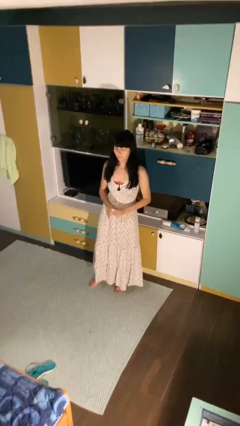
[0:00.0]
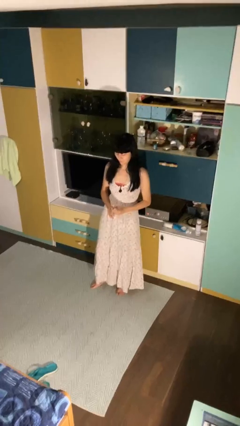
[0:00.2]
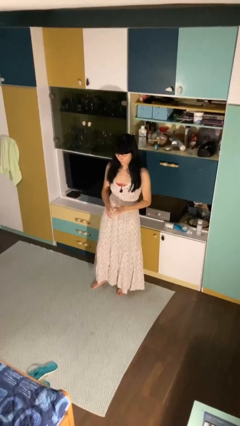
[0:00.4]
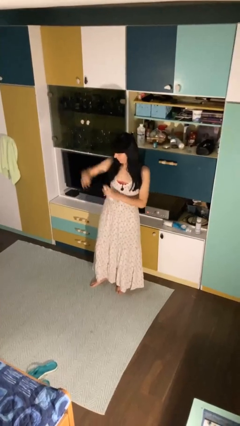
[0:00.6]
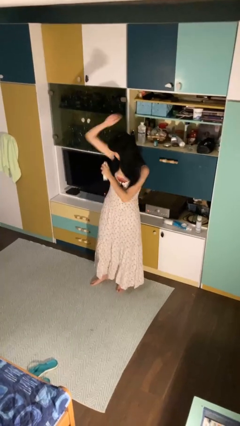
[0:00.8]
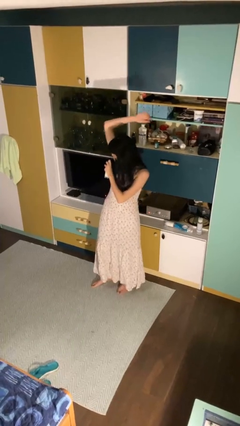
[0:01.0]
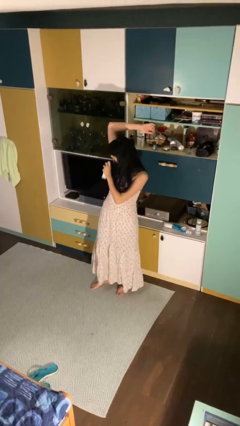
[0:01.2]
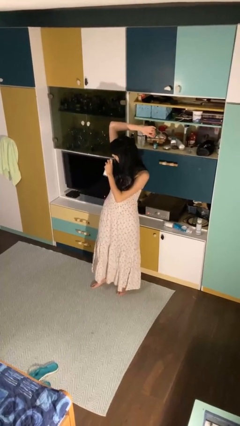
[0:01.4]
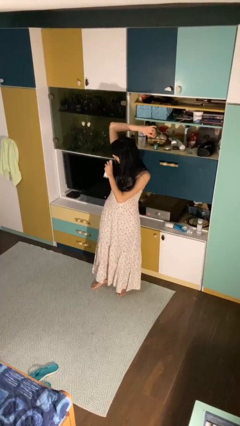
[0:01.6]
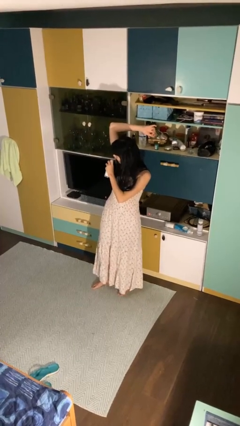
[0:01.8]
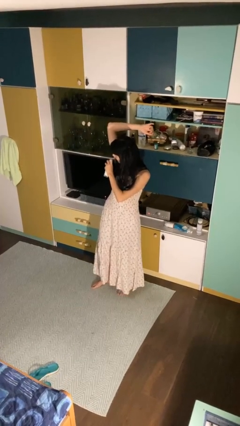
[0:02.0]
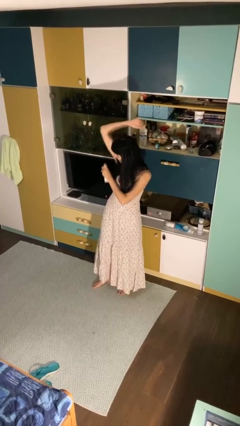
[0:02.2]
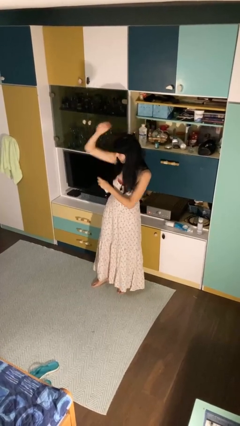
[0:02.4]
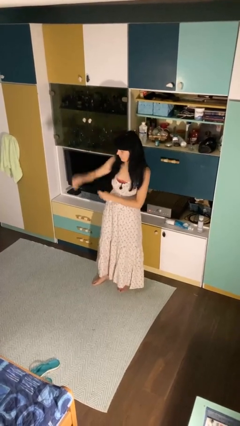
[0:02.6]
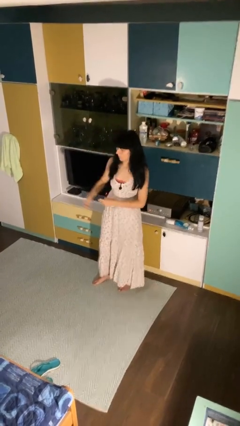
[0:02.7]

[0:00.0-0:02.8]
person applies deodorant

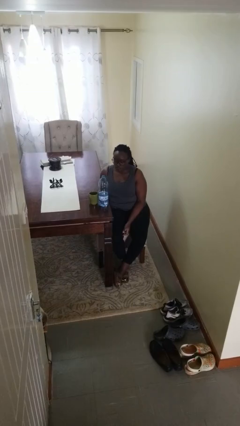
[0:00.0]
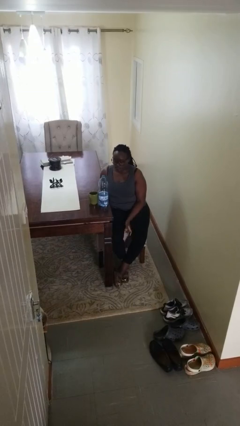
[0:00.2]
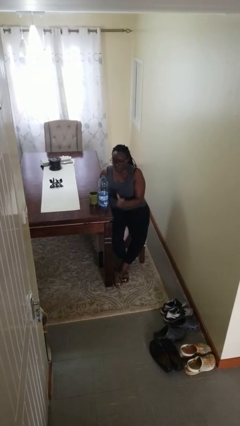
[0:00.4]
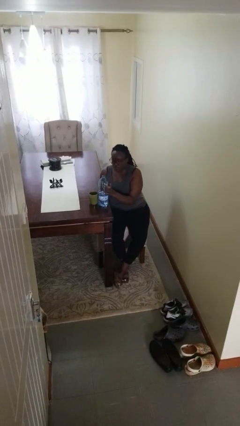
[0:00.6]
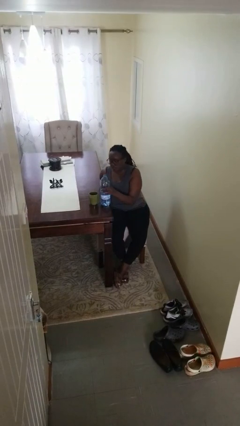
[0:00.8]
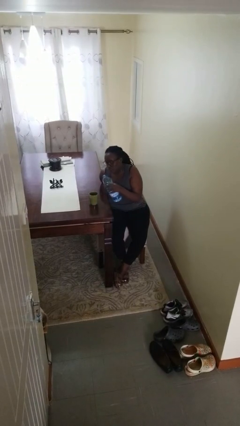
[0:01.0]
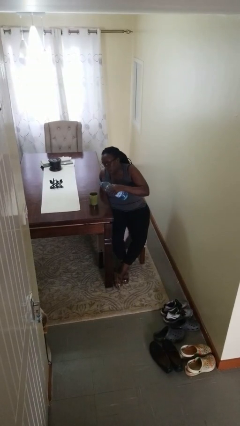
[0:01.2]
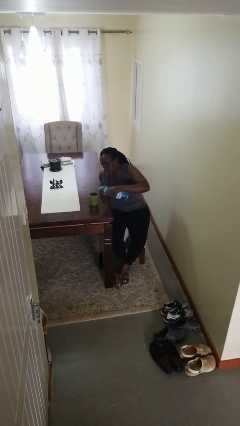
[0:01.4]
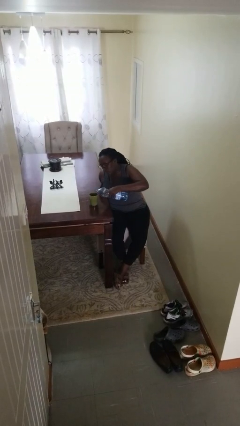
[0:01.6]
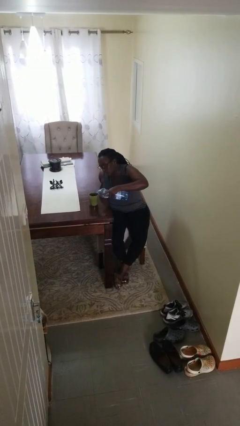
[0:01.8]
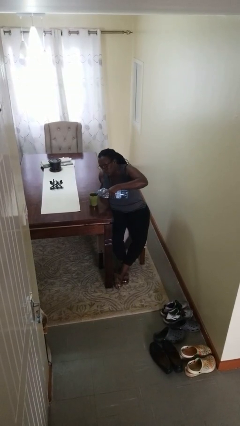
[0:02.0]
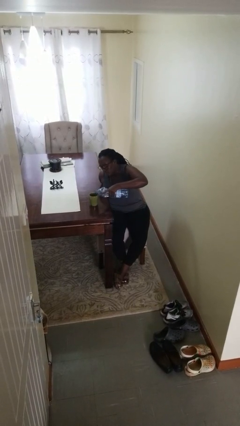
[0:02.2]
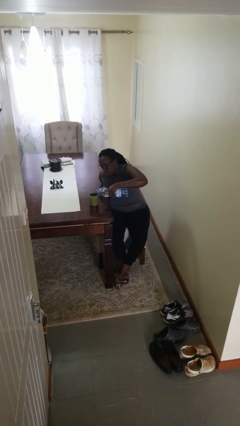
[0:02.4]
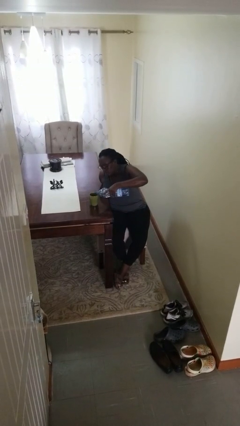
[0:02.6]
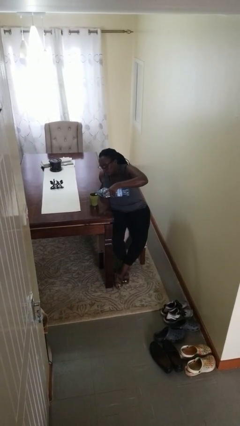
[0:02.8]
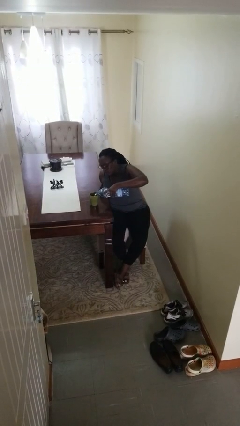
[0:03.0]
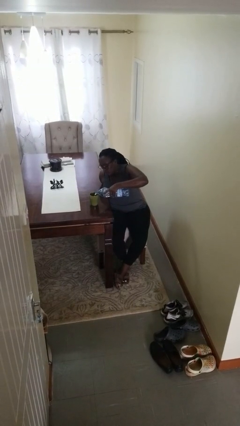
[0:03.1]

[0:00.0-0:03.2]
person pours liquid into cup

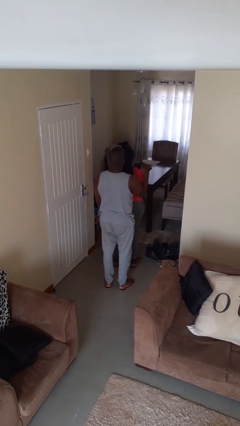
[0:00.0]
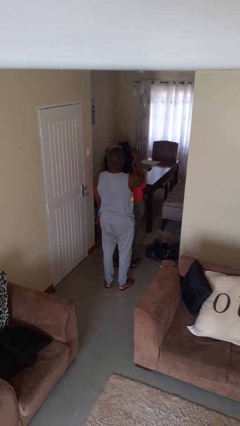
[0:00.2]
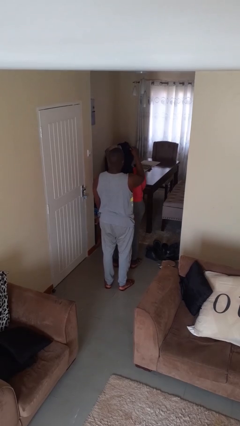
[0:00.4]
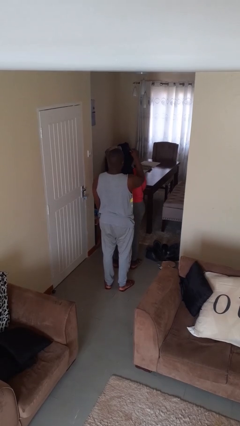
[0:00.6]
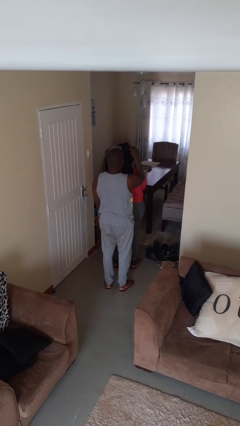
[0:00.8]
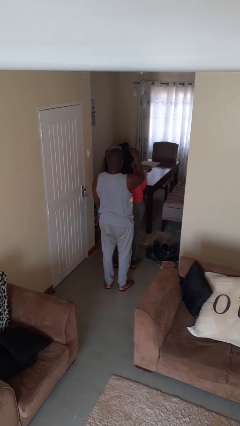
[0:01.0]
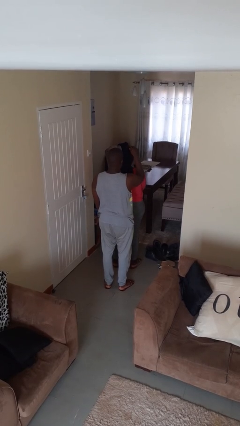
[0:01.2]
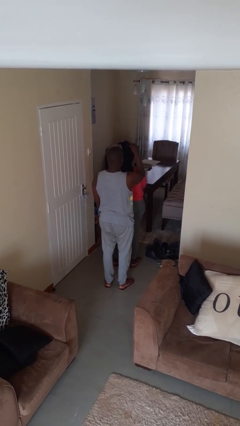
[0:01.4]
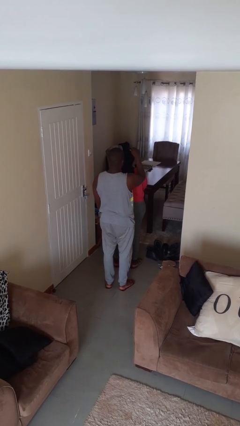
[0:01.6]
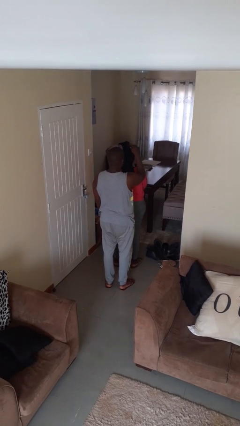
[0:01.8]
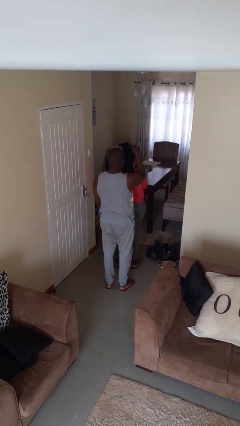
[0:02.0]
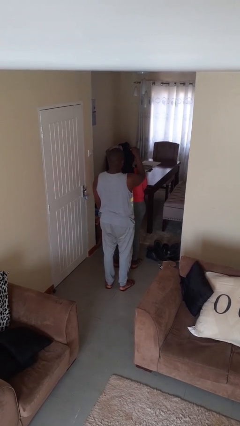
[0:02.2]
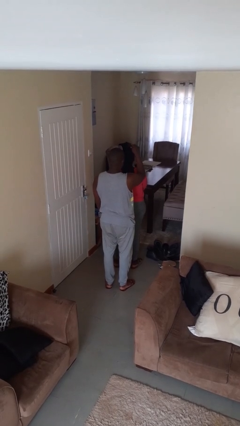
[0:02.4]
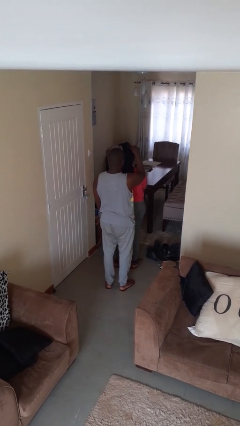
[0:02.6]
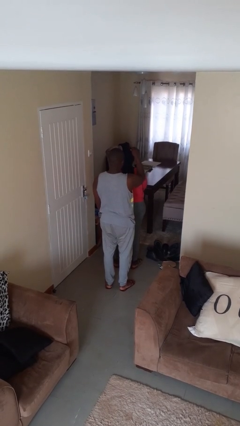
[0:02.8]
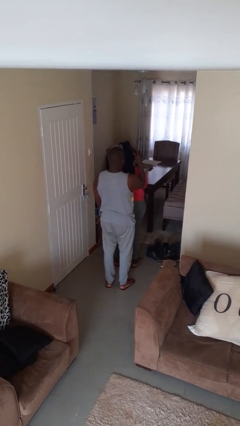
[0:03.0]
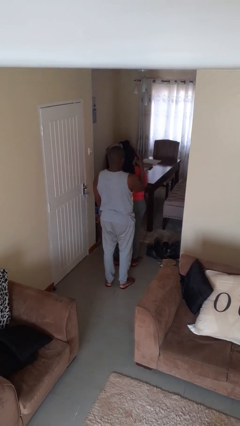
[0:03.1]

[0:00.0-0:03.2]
person brushes hair of person

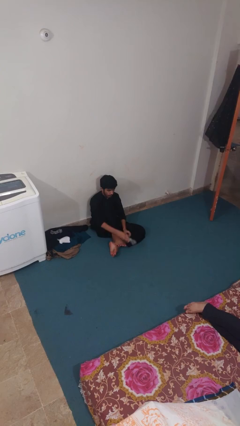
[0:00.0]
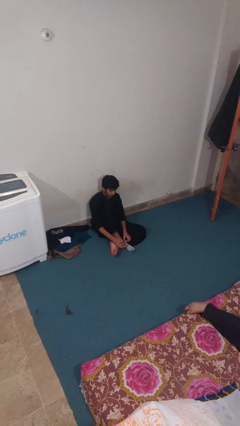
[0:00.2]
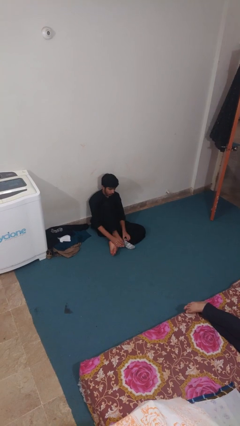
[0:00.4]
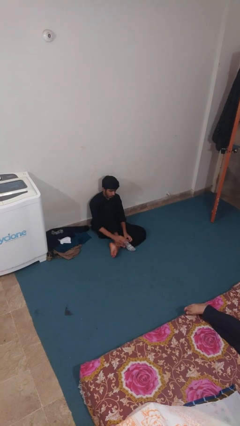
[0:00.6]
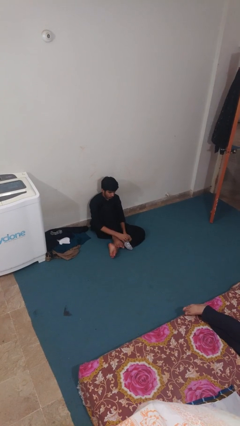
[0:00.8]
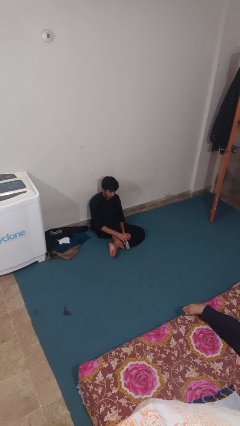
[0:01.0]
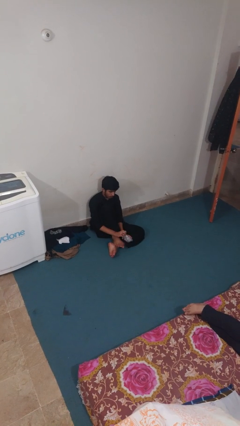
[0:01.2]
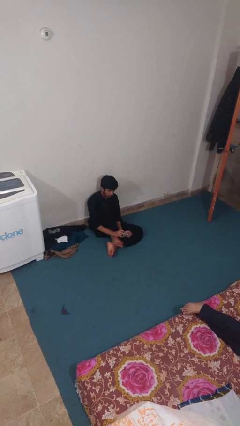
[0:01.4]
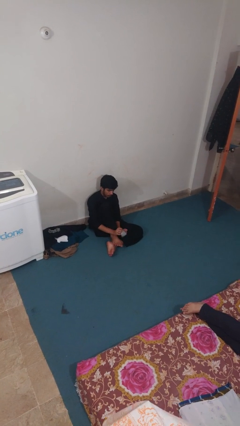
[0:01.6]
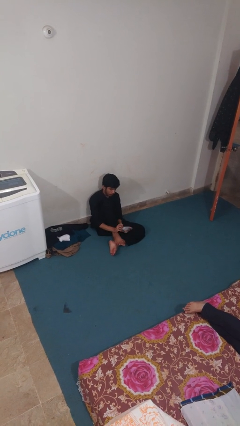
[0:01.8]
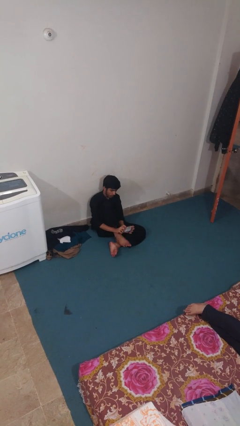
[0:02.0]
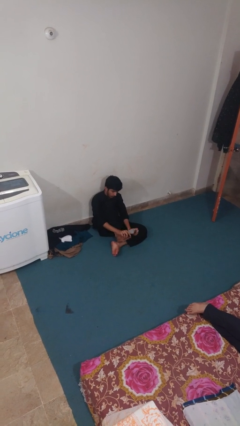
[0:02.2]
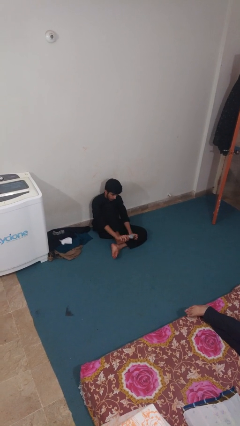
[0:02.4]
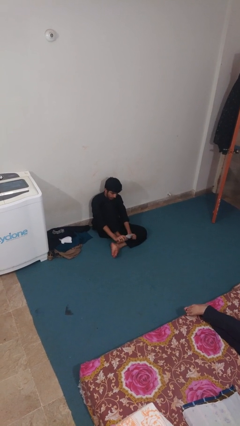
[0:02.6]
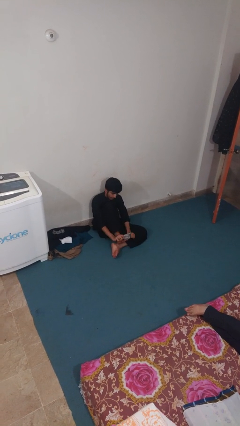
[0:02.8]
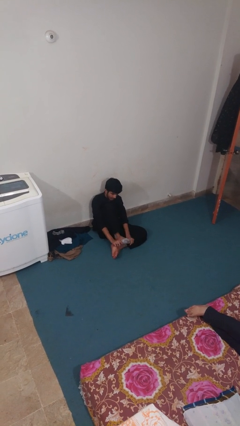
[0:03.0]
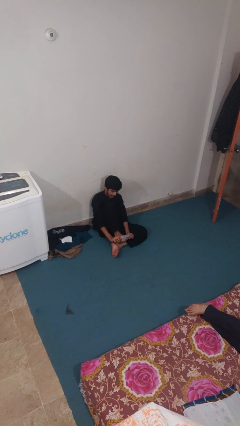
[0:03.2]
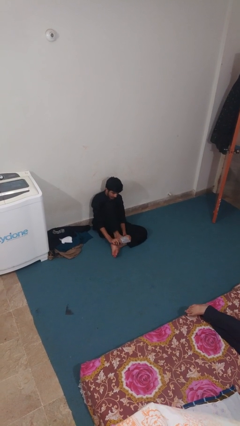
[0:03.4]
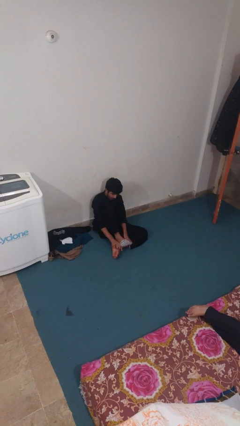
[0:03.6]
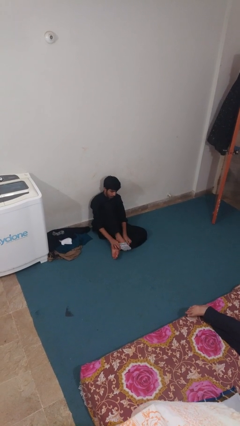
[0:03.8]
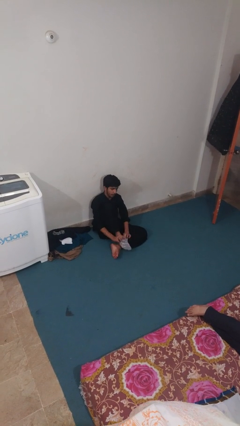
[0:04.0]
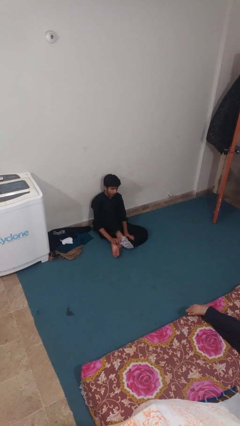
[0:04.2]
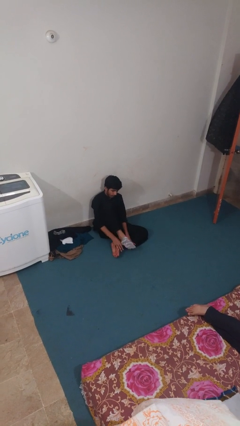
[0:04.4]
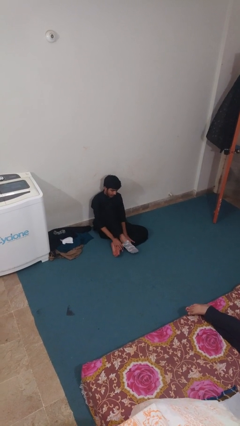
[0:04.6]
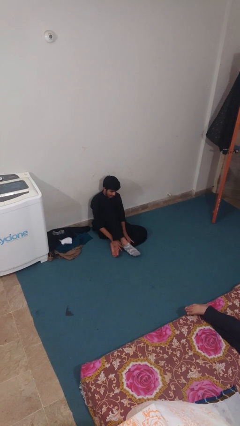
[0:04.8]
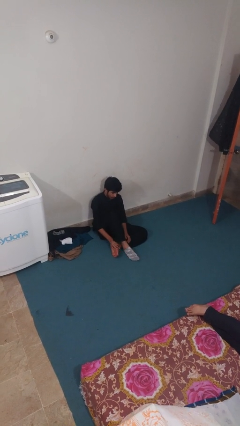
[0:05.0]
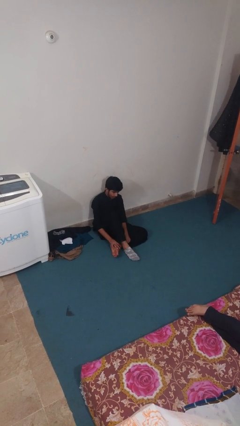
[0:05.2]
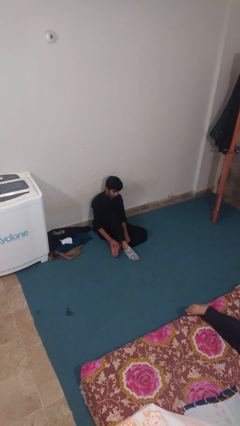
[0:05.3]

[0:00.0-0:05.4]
person puts on socks

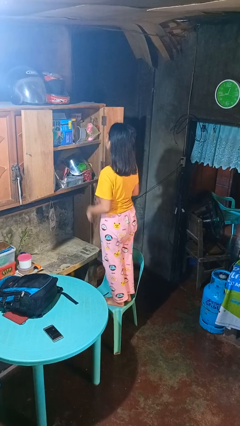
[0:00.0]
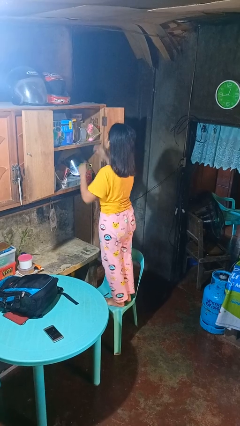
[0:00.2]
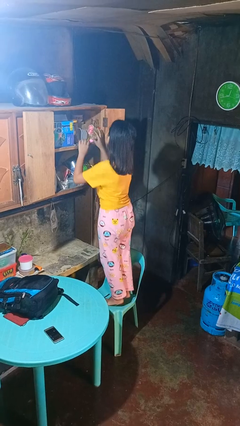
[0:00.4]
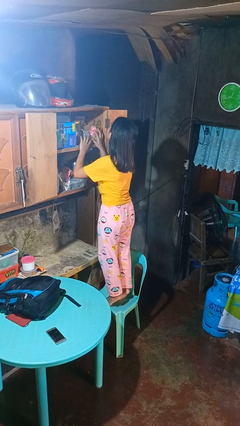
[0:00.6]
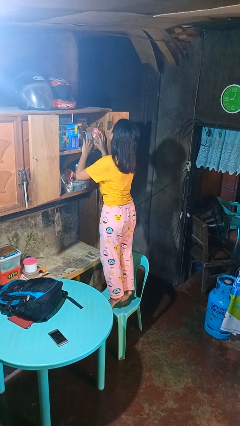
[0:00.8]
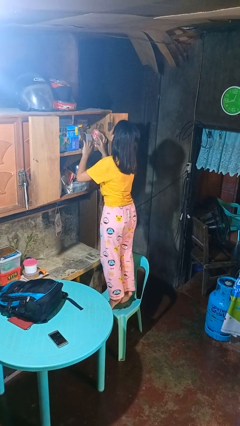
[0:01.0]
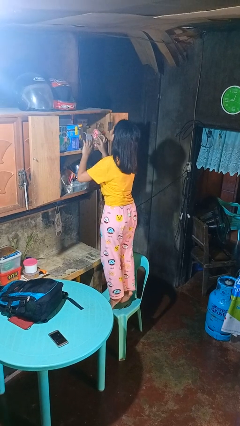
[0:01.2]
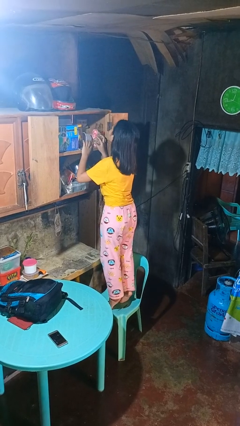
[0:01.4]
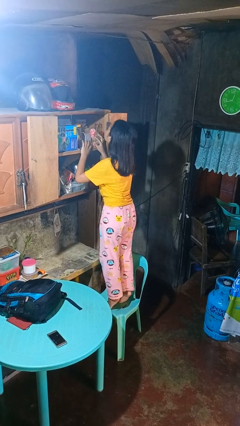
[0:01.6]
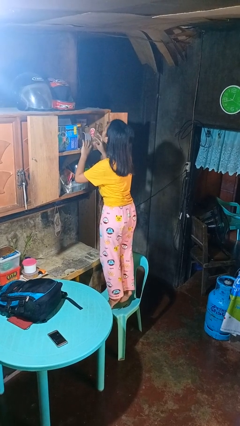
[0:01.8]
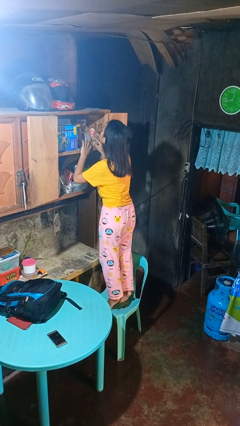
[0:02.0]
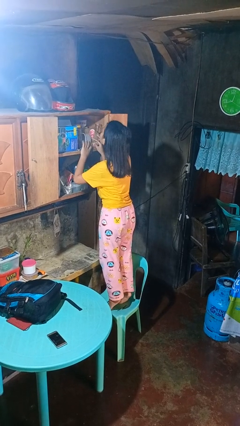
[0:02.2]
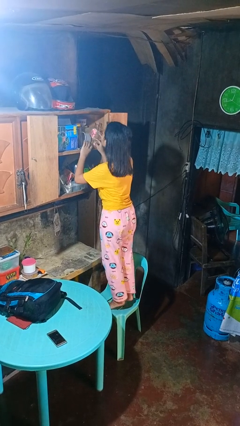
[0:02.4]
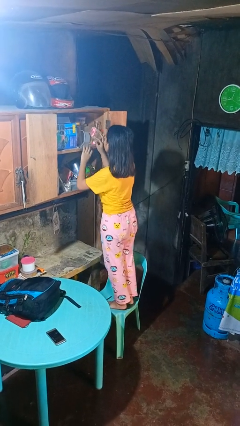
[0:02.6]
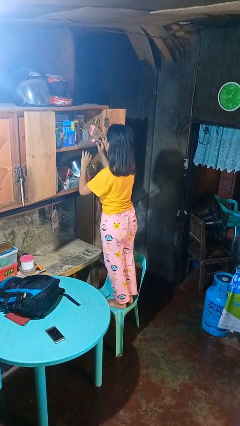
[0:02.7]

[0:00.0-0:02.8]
person searches in cabinet
